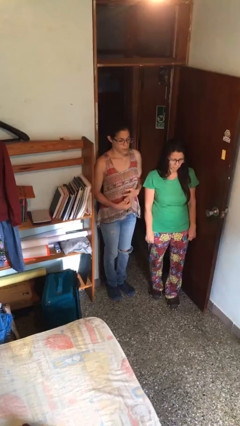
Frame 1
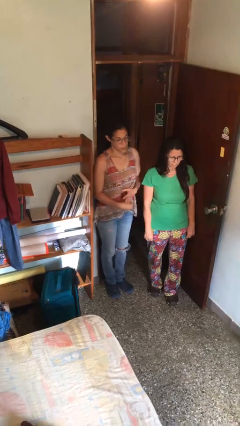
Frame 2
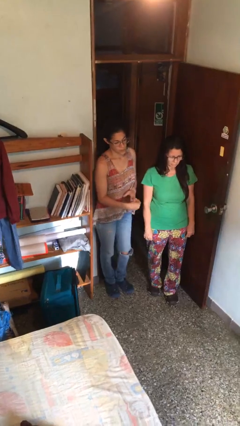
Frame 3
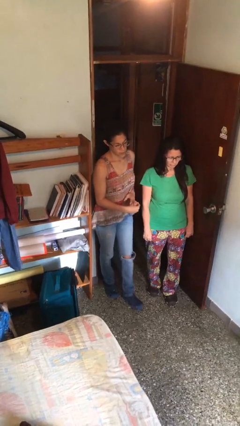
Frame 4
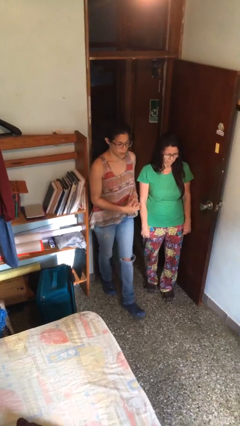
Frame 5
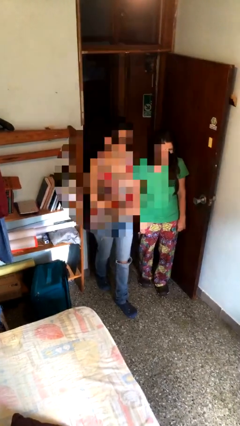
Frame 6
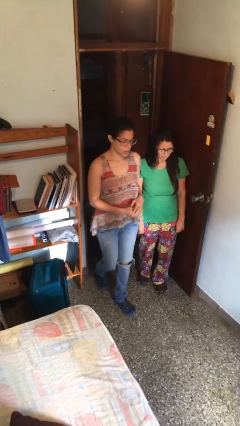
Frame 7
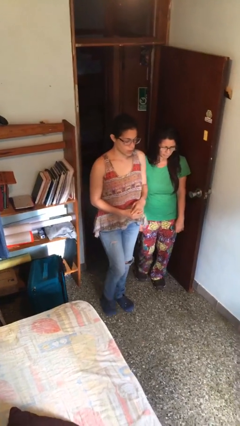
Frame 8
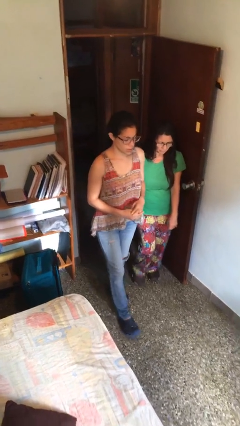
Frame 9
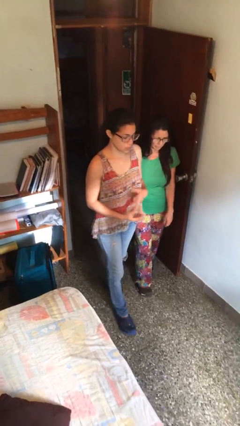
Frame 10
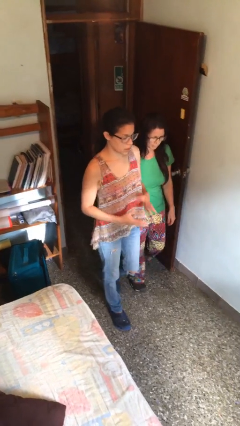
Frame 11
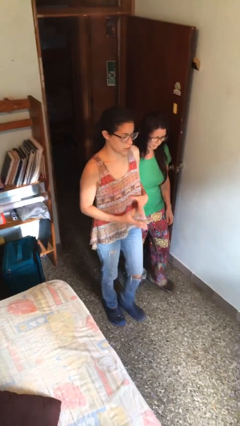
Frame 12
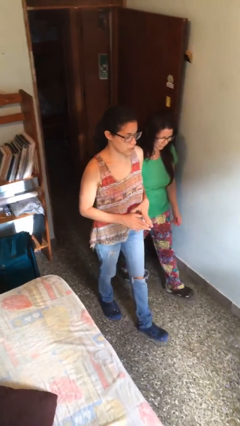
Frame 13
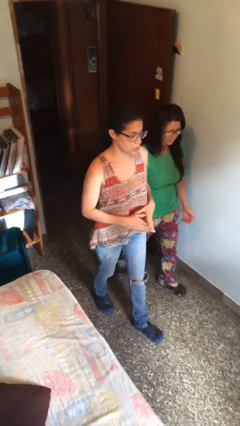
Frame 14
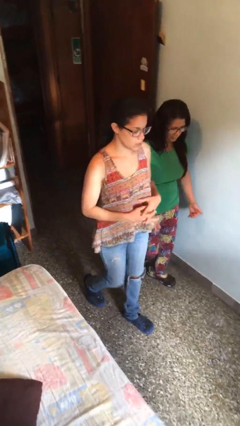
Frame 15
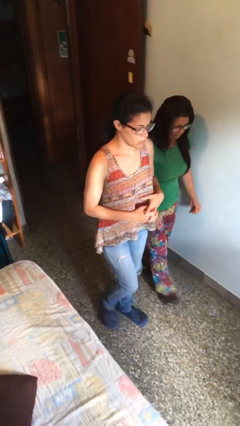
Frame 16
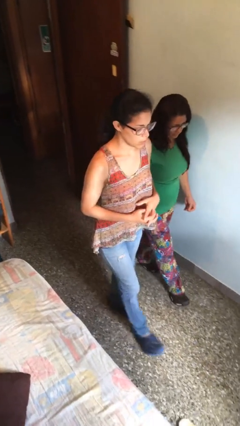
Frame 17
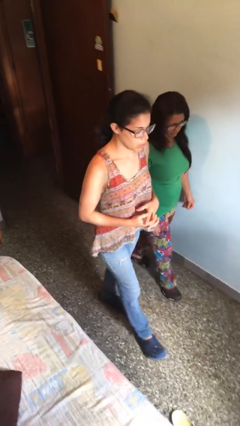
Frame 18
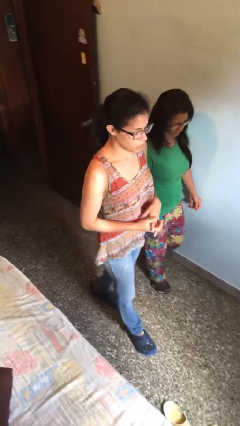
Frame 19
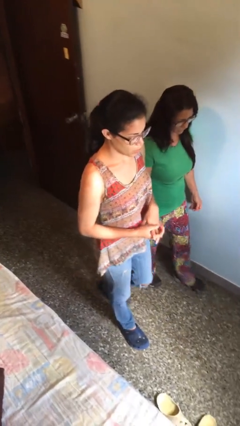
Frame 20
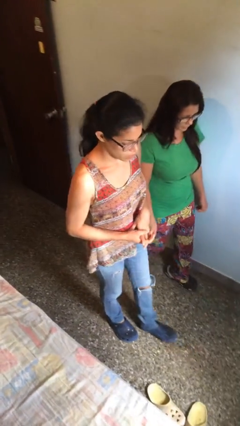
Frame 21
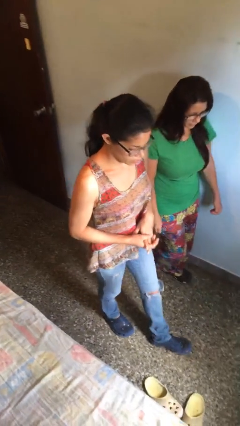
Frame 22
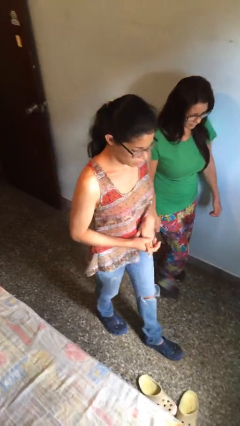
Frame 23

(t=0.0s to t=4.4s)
person talks to person

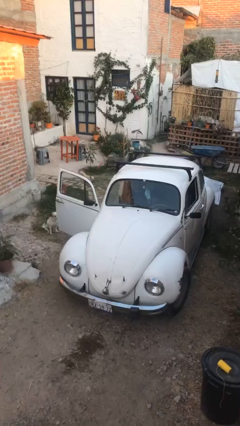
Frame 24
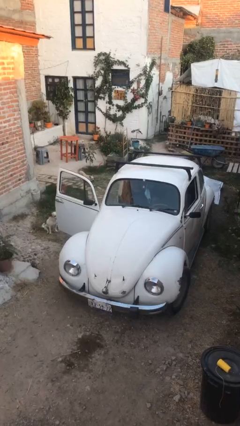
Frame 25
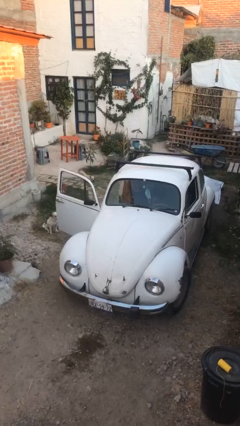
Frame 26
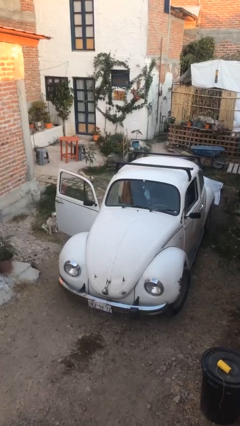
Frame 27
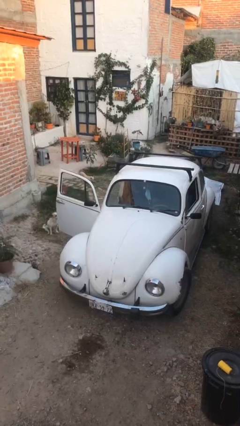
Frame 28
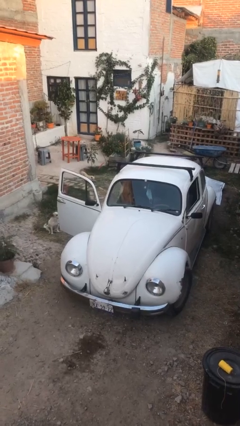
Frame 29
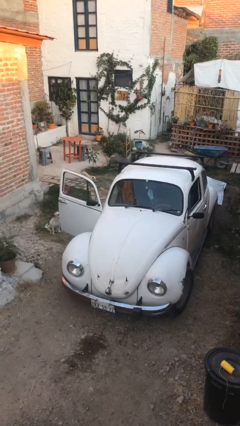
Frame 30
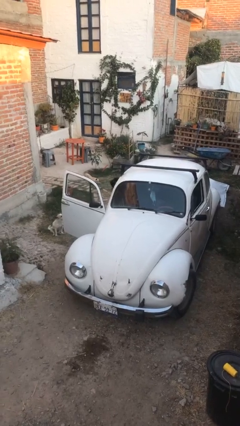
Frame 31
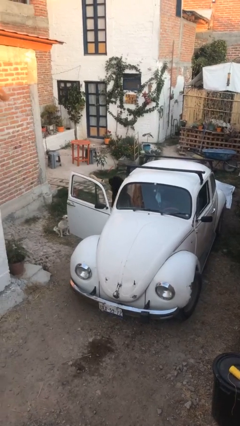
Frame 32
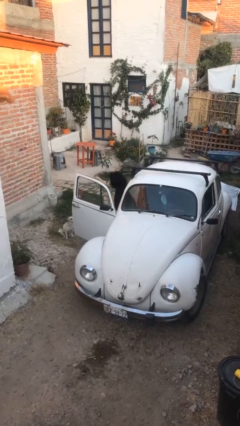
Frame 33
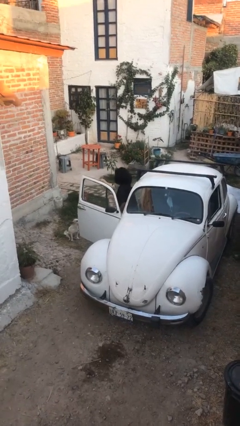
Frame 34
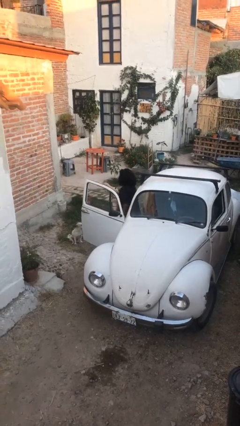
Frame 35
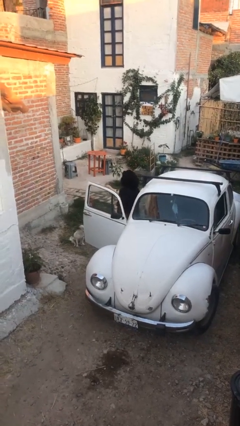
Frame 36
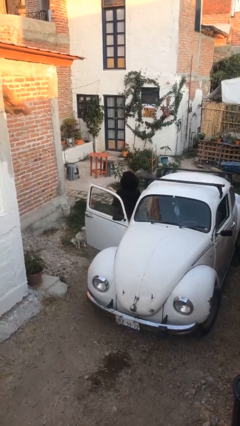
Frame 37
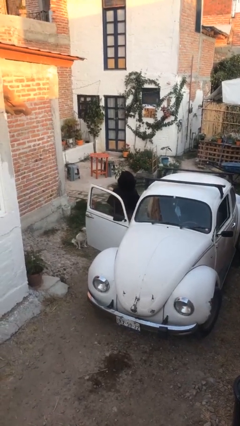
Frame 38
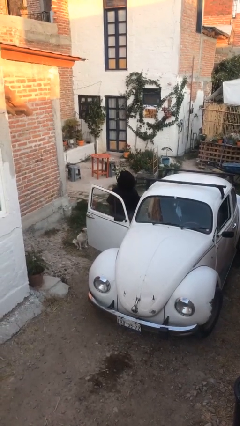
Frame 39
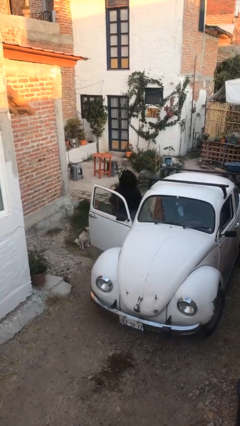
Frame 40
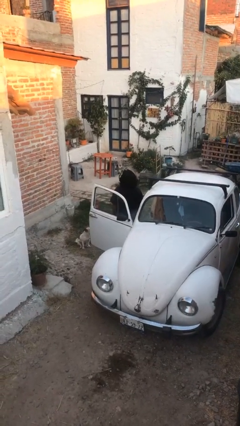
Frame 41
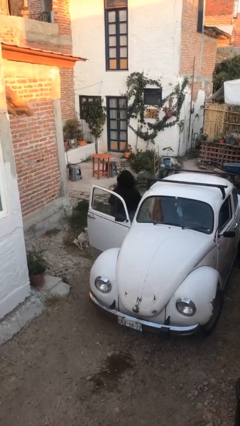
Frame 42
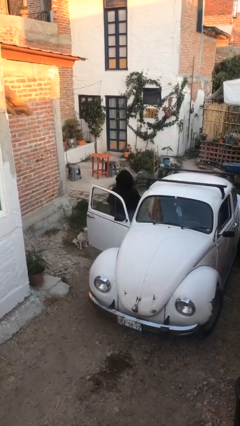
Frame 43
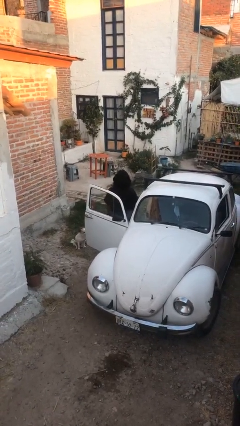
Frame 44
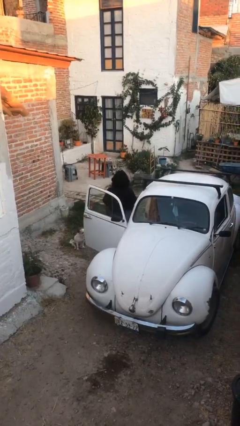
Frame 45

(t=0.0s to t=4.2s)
person exits car

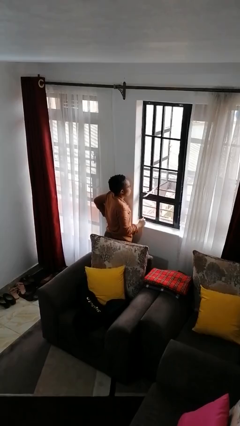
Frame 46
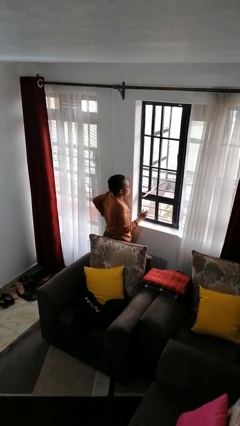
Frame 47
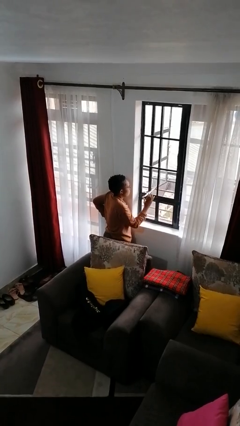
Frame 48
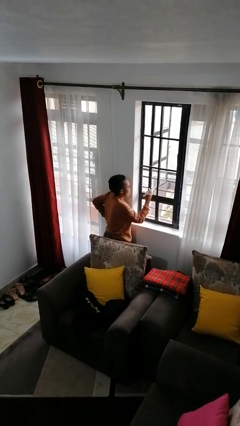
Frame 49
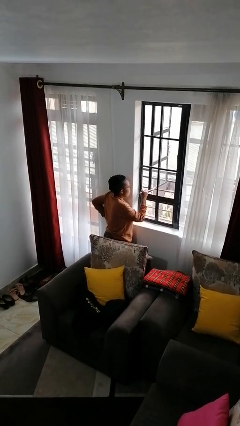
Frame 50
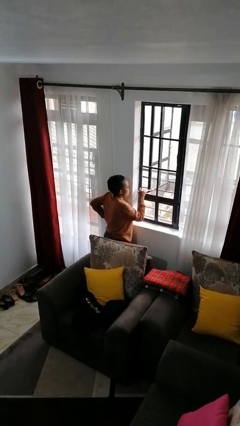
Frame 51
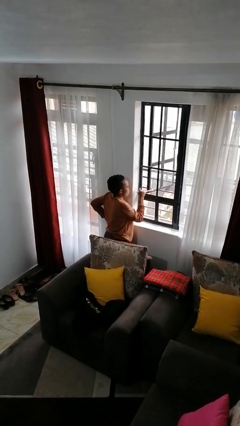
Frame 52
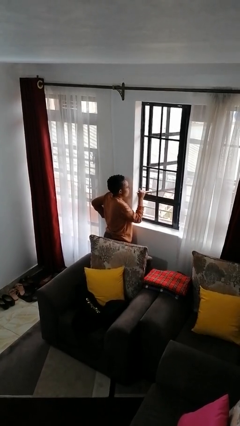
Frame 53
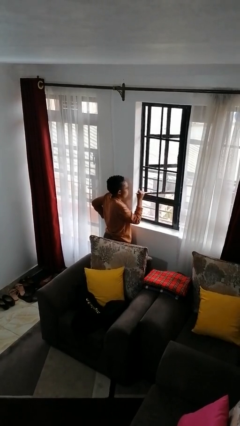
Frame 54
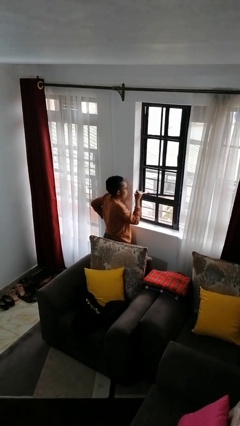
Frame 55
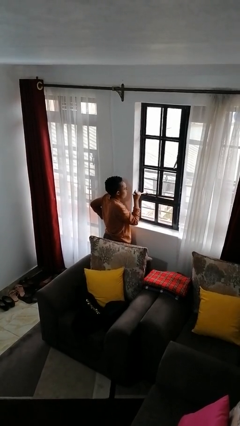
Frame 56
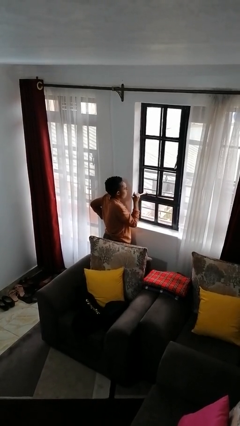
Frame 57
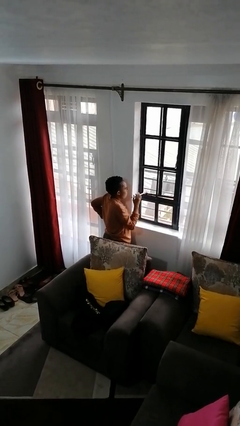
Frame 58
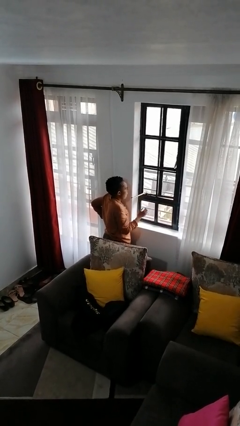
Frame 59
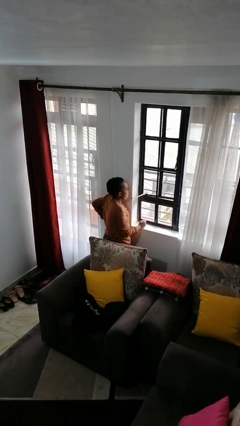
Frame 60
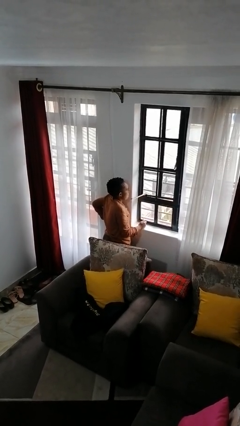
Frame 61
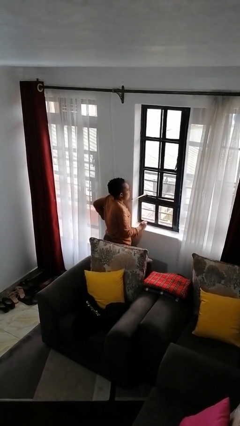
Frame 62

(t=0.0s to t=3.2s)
person closes home window

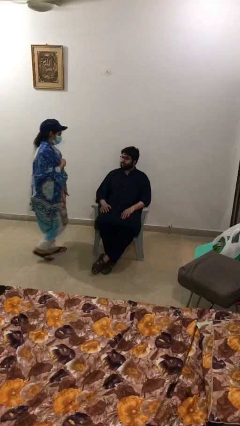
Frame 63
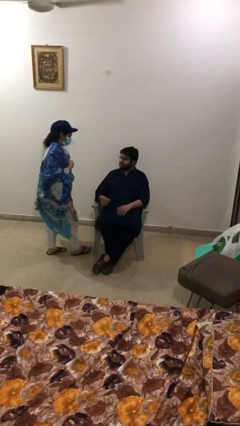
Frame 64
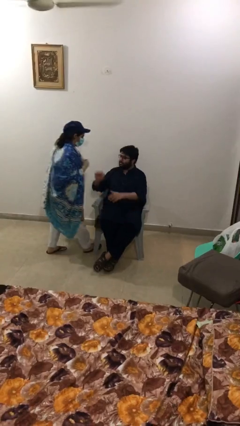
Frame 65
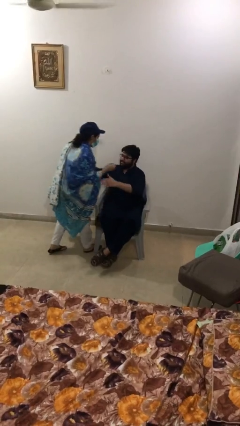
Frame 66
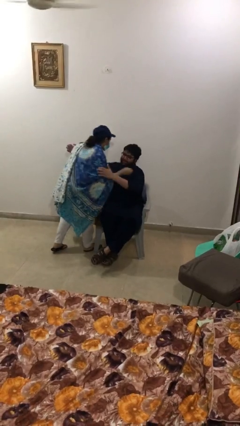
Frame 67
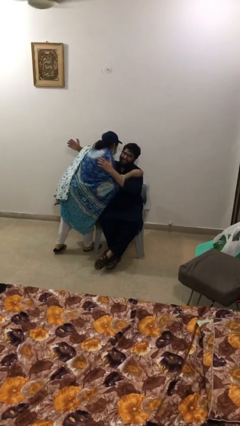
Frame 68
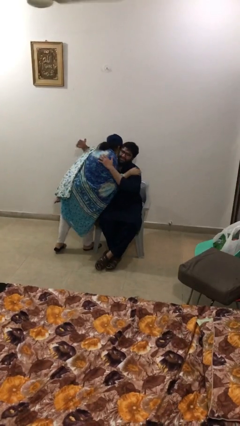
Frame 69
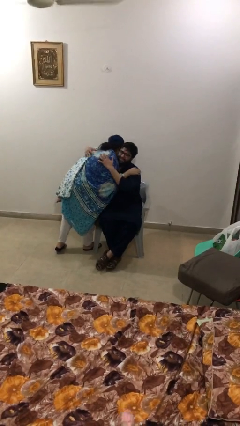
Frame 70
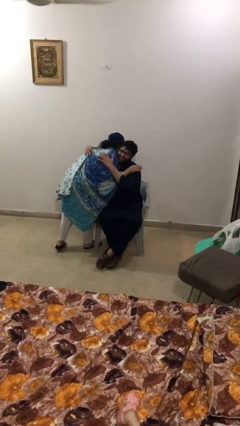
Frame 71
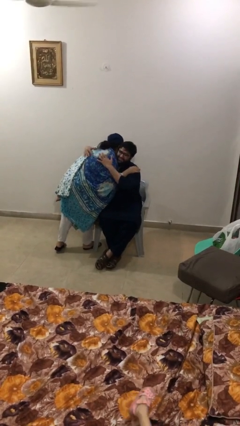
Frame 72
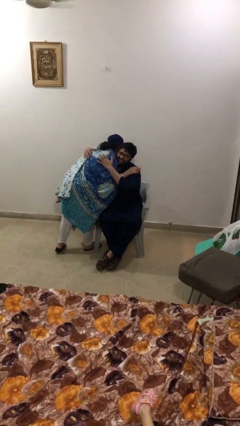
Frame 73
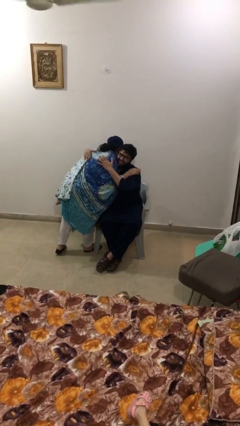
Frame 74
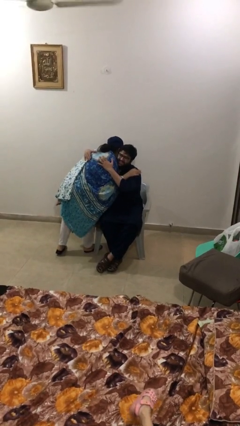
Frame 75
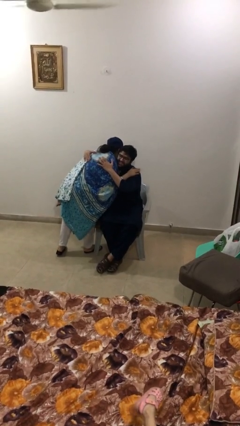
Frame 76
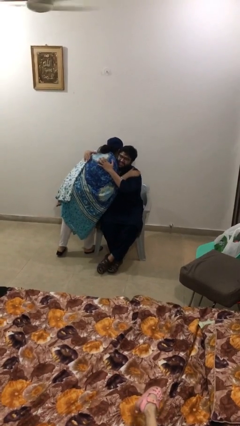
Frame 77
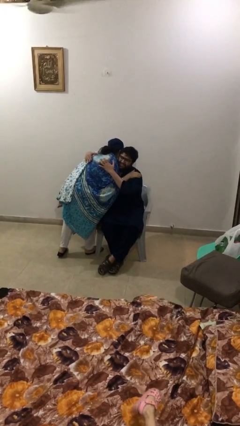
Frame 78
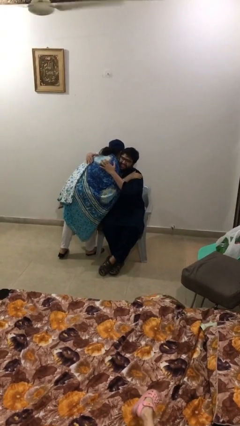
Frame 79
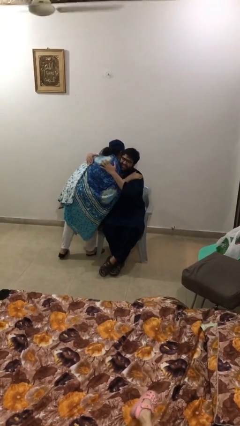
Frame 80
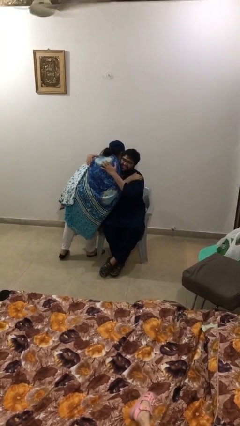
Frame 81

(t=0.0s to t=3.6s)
person embraces person

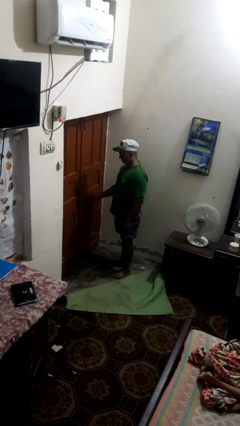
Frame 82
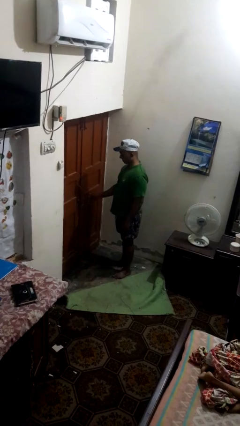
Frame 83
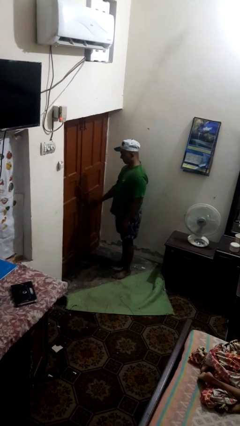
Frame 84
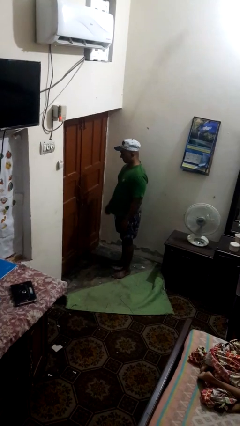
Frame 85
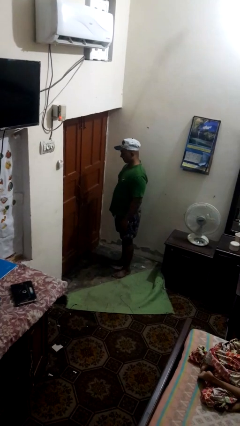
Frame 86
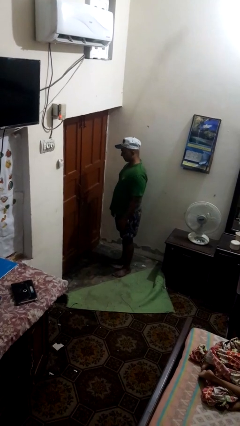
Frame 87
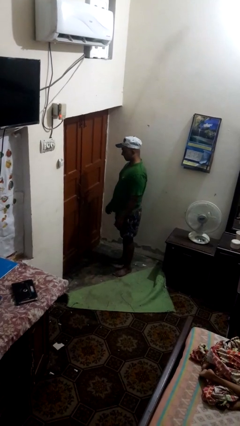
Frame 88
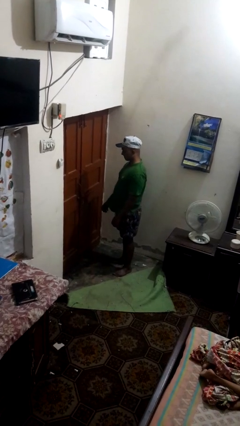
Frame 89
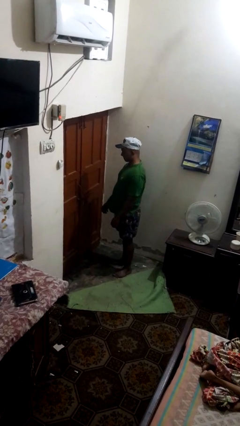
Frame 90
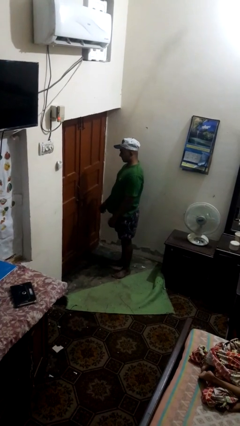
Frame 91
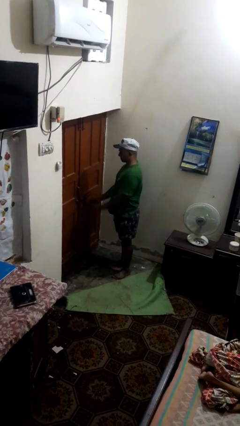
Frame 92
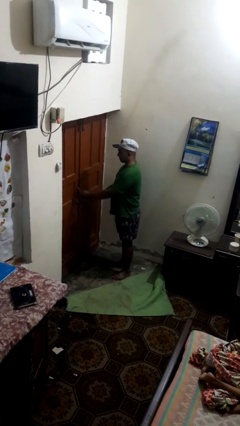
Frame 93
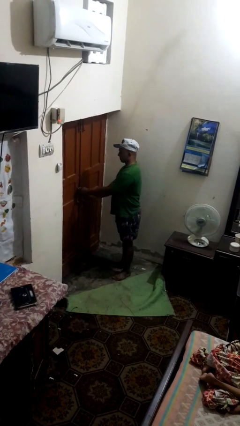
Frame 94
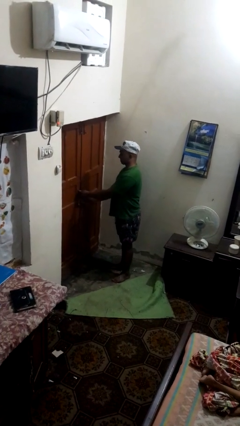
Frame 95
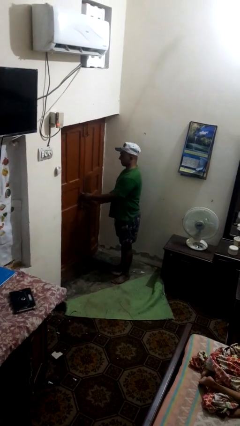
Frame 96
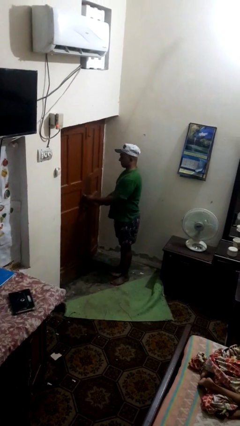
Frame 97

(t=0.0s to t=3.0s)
person unlocks door with keys
